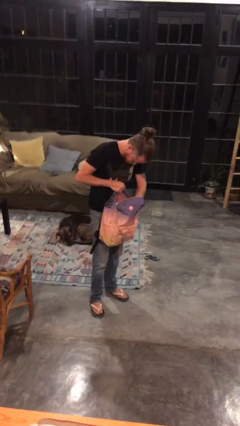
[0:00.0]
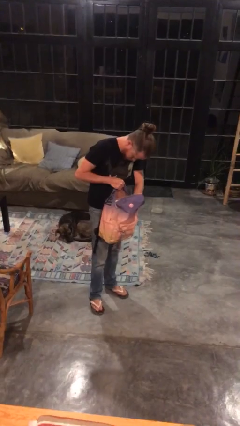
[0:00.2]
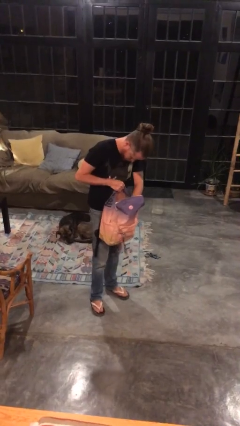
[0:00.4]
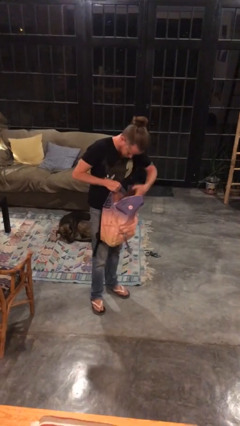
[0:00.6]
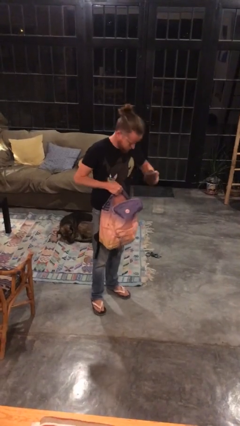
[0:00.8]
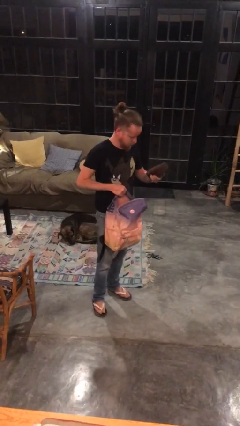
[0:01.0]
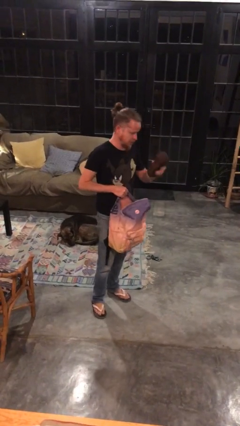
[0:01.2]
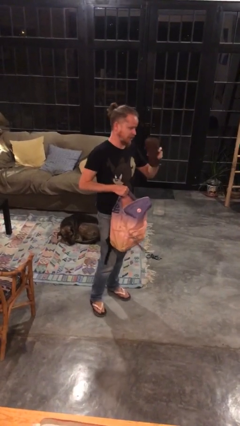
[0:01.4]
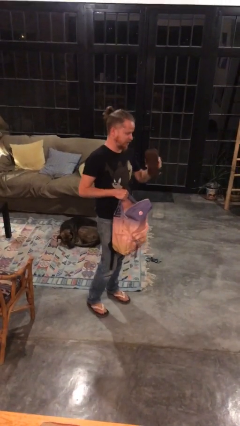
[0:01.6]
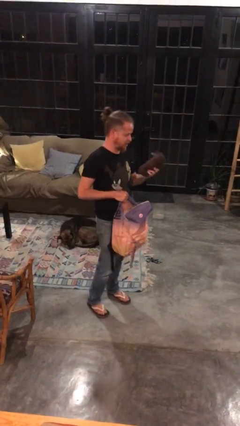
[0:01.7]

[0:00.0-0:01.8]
person takes object from backpack

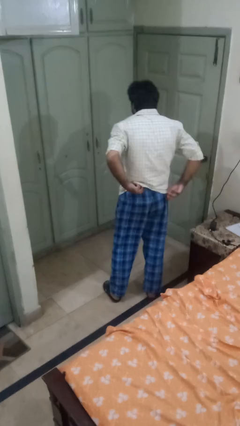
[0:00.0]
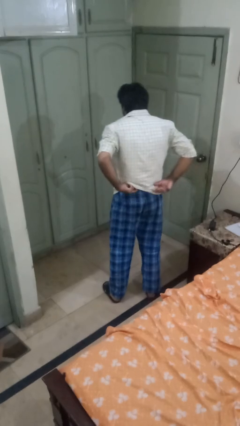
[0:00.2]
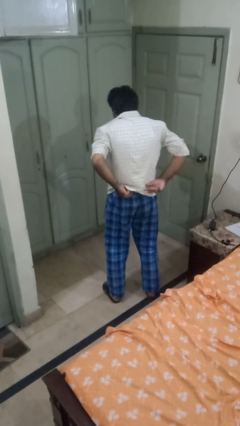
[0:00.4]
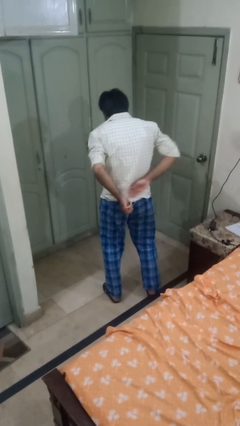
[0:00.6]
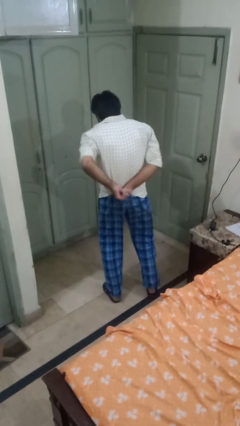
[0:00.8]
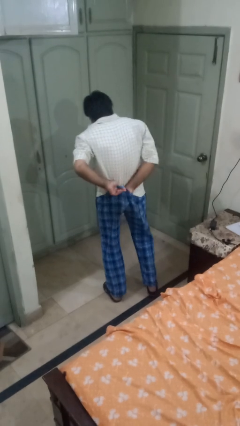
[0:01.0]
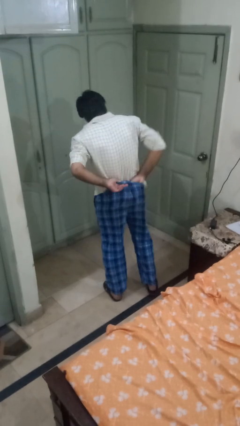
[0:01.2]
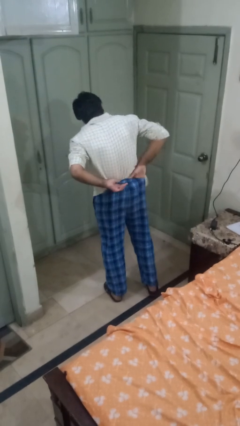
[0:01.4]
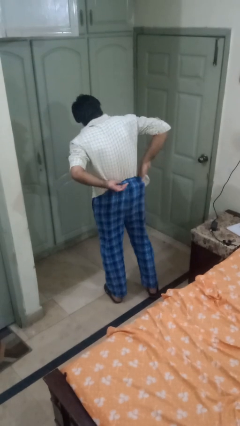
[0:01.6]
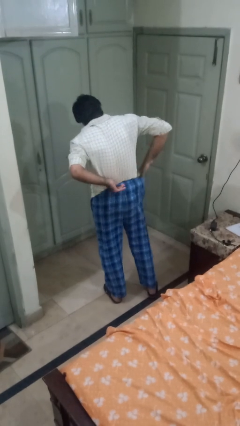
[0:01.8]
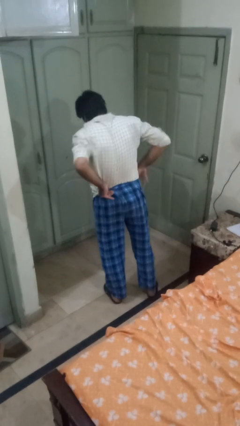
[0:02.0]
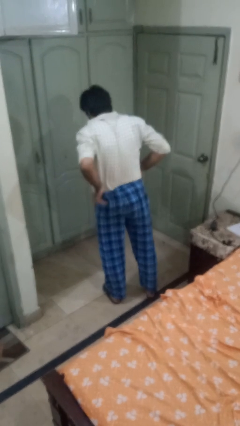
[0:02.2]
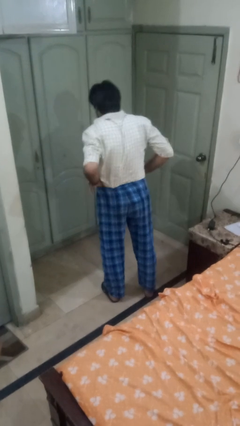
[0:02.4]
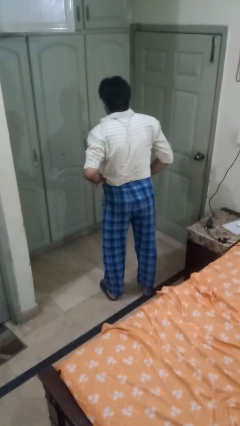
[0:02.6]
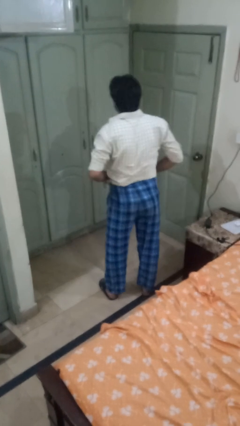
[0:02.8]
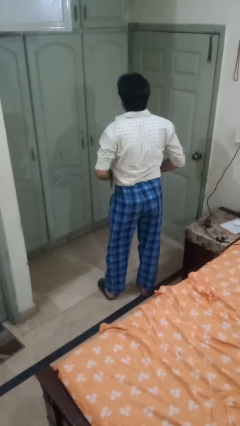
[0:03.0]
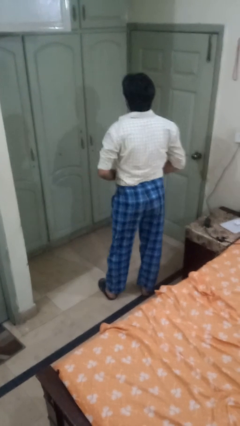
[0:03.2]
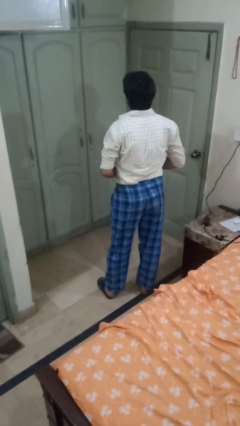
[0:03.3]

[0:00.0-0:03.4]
person tucks in shirt

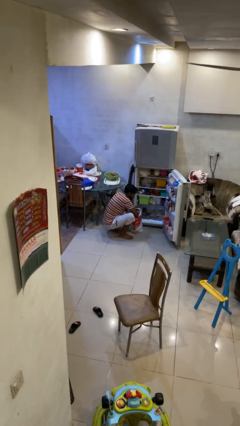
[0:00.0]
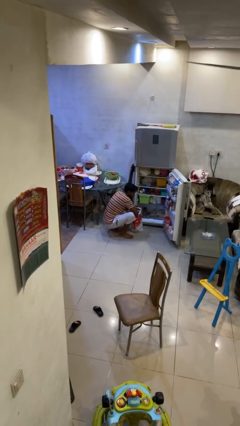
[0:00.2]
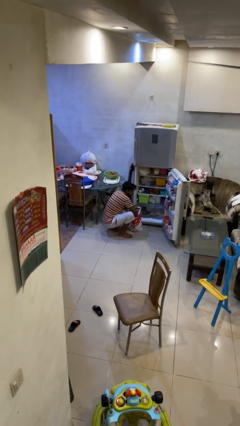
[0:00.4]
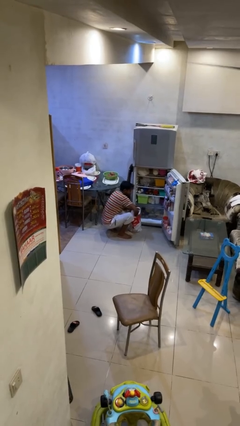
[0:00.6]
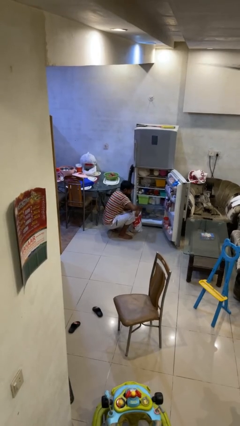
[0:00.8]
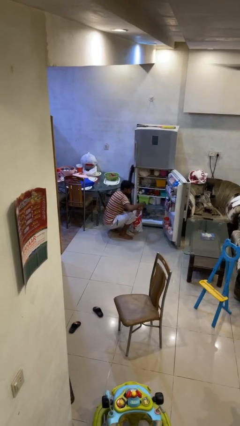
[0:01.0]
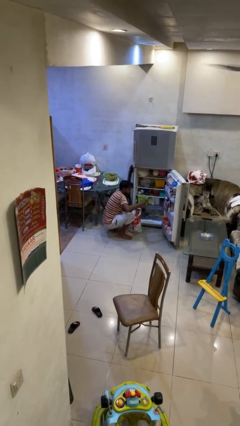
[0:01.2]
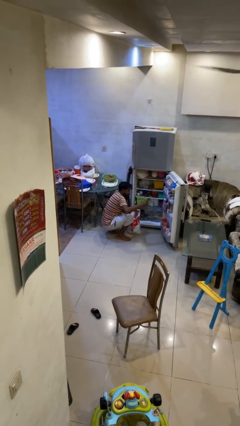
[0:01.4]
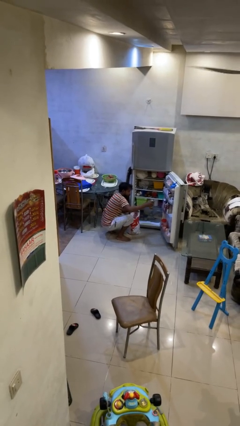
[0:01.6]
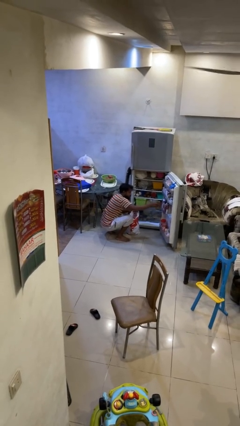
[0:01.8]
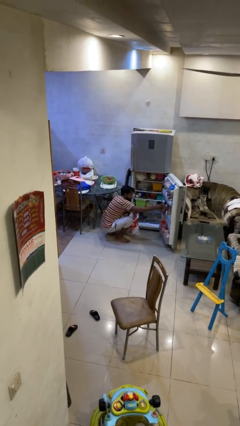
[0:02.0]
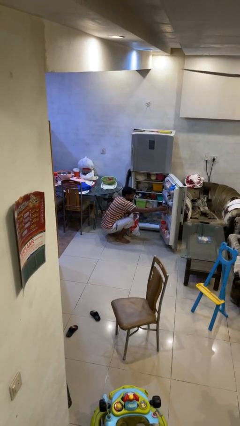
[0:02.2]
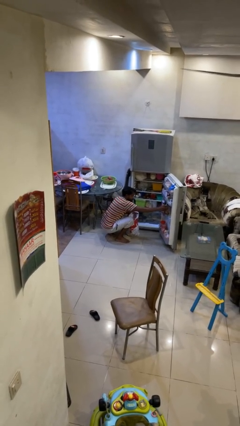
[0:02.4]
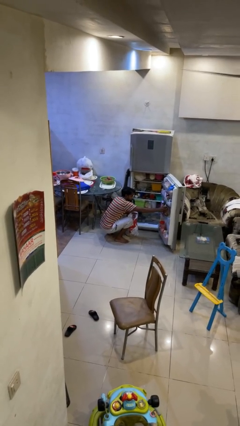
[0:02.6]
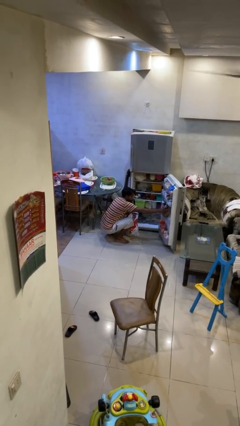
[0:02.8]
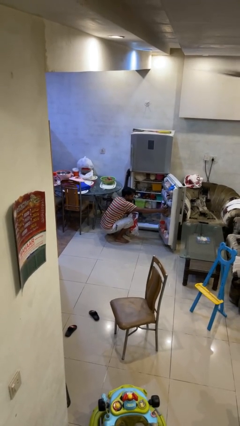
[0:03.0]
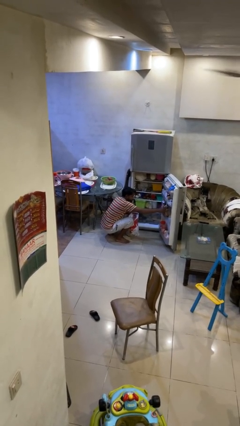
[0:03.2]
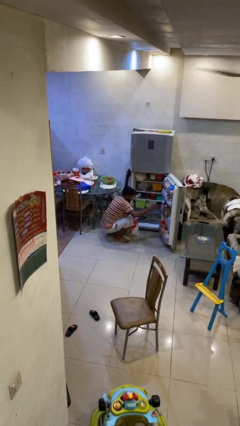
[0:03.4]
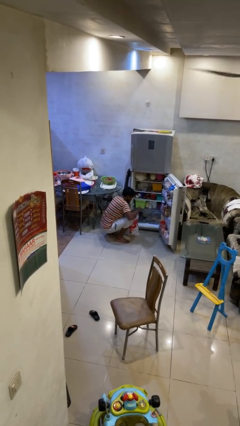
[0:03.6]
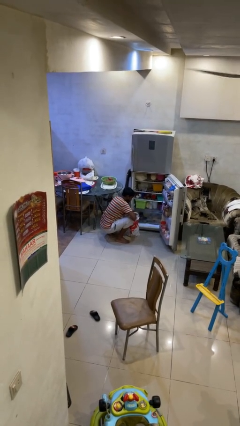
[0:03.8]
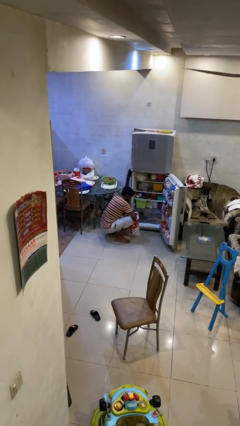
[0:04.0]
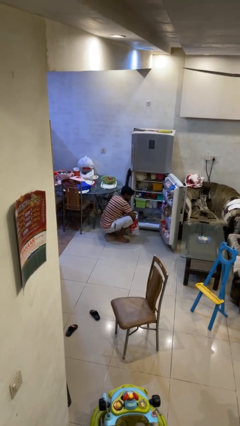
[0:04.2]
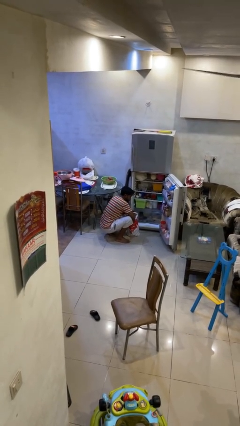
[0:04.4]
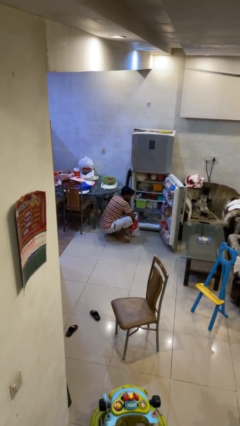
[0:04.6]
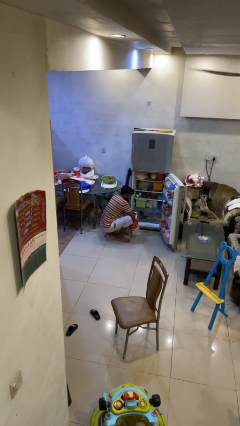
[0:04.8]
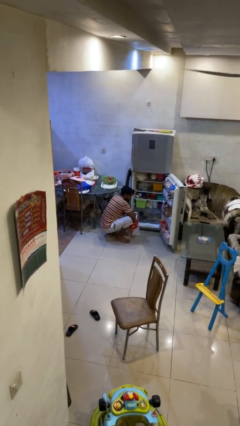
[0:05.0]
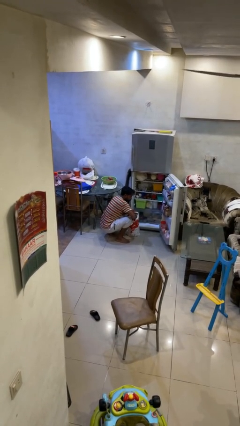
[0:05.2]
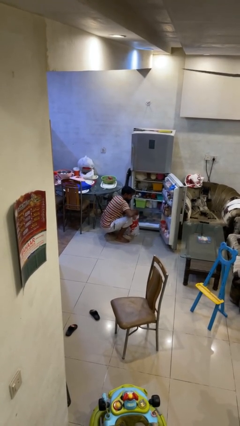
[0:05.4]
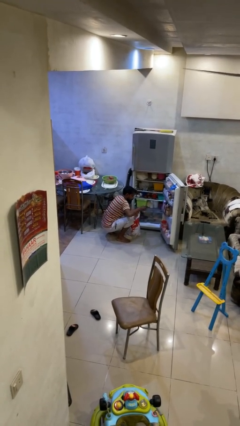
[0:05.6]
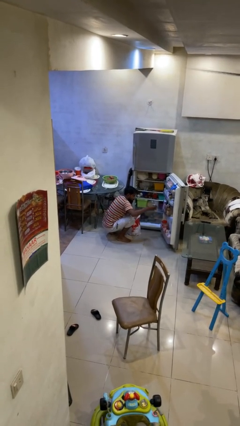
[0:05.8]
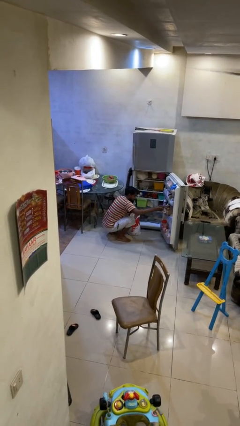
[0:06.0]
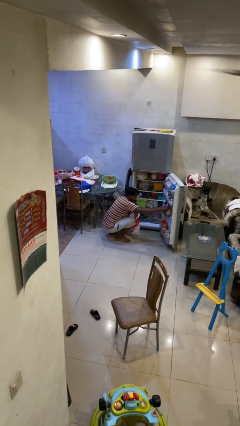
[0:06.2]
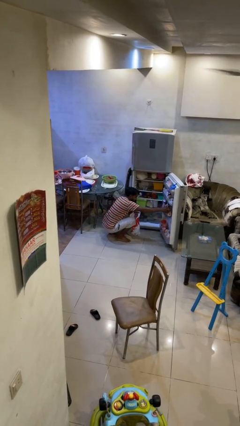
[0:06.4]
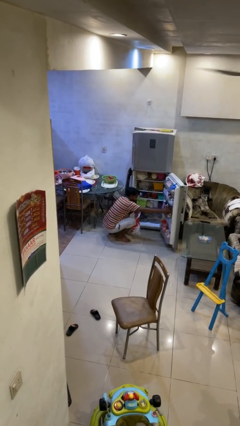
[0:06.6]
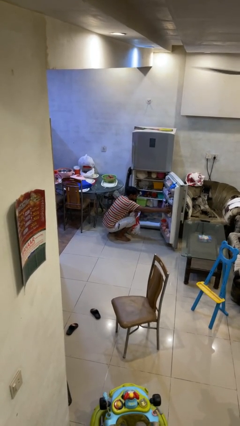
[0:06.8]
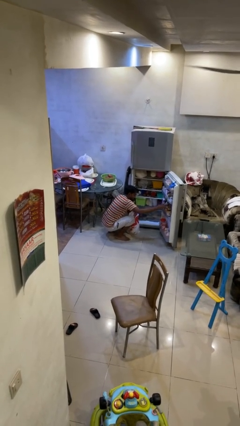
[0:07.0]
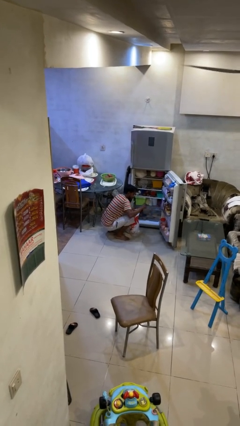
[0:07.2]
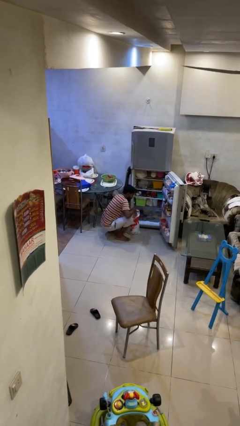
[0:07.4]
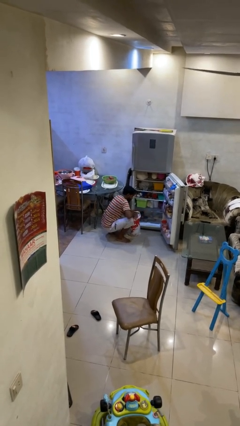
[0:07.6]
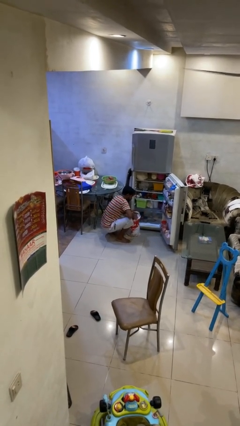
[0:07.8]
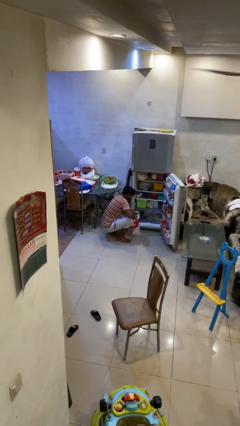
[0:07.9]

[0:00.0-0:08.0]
person loads groceries into refrigerator

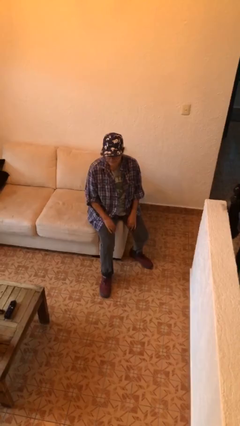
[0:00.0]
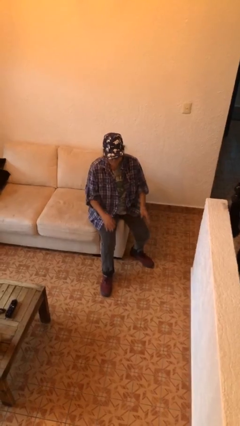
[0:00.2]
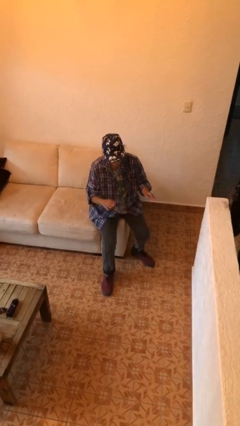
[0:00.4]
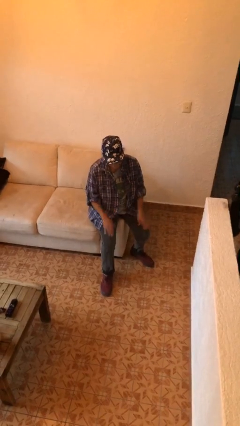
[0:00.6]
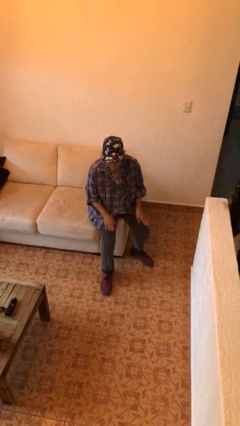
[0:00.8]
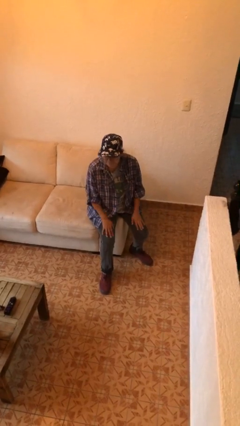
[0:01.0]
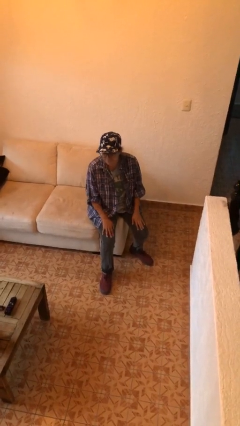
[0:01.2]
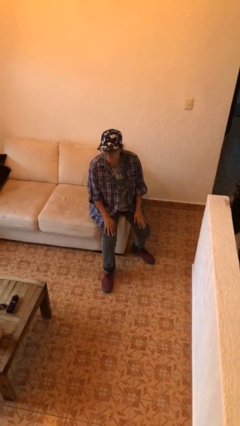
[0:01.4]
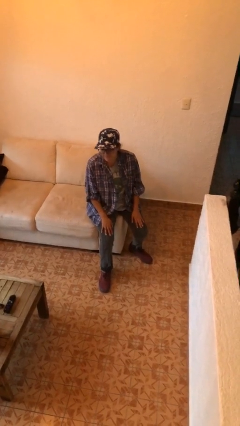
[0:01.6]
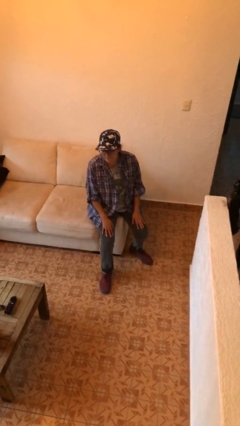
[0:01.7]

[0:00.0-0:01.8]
person slaps hands on thighs

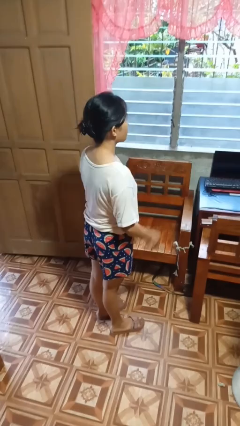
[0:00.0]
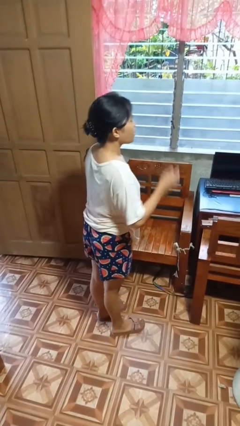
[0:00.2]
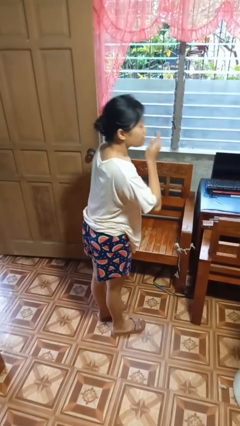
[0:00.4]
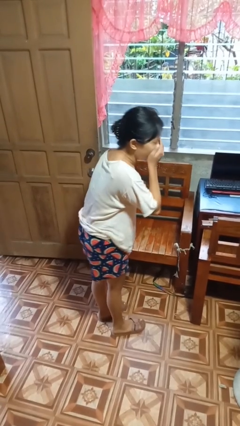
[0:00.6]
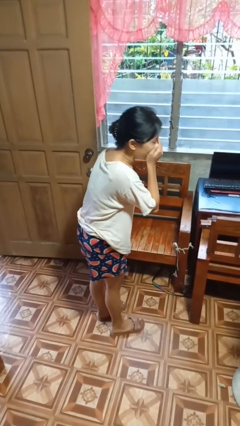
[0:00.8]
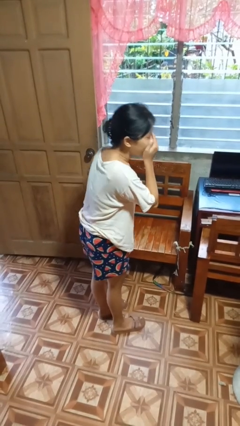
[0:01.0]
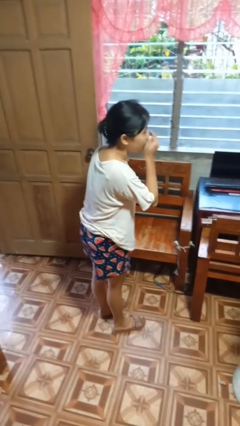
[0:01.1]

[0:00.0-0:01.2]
person sneezes into hand

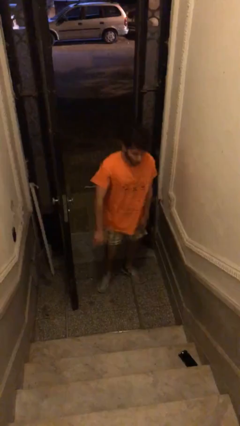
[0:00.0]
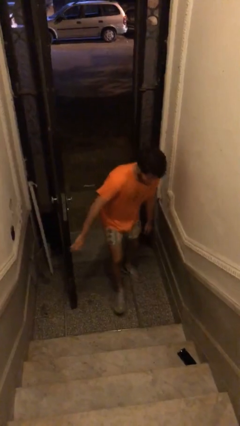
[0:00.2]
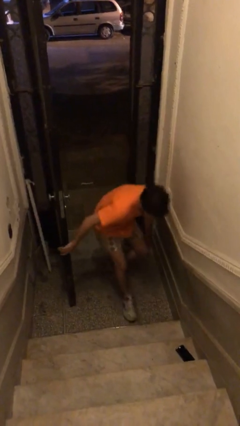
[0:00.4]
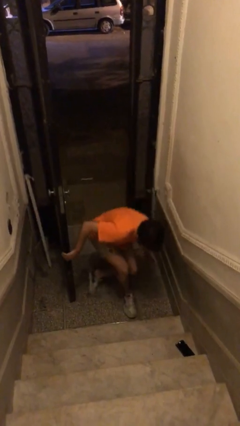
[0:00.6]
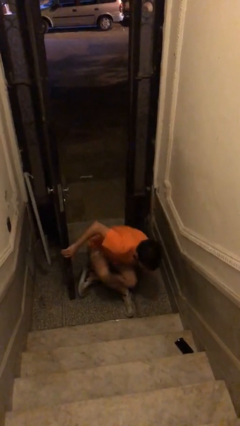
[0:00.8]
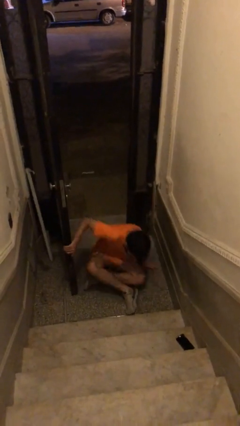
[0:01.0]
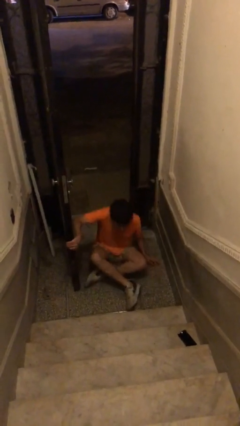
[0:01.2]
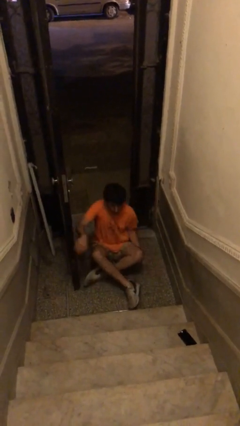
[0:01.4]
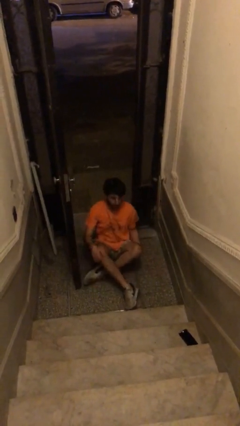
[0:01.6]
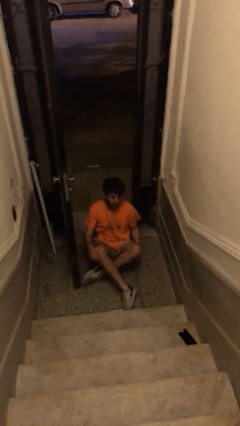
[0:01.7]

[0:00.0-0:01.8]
person sits down
